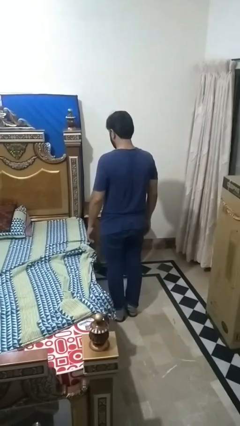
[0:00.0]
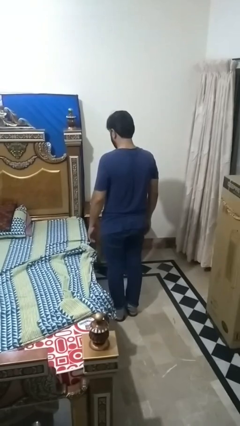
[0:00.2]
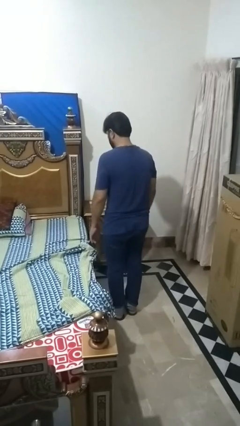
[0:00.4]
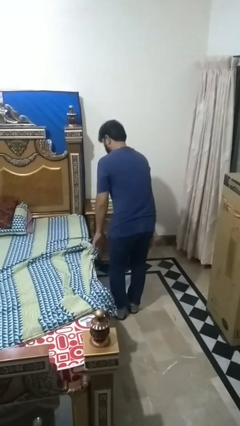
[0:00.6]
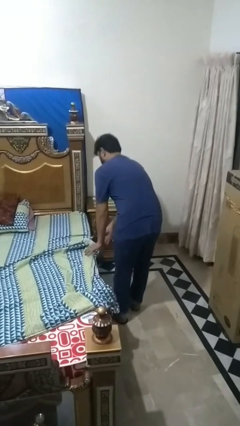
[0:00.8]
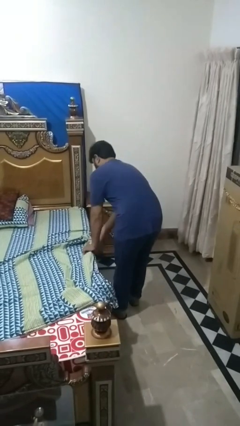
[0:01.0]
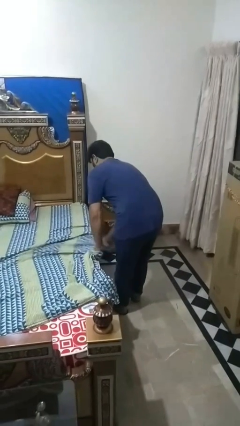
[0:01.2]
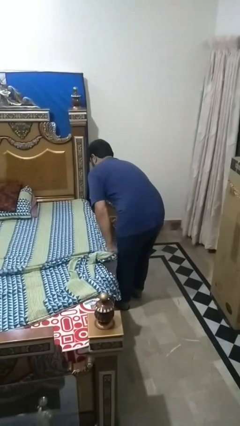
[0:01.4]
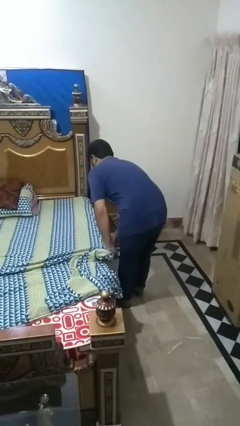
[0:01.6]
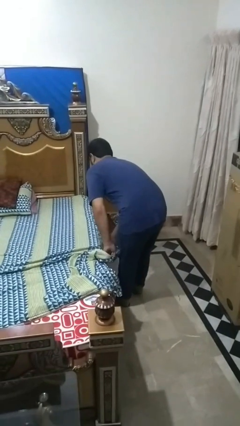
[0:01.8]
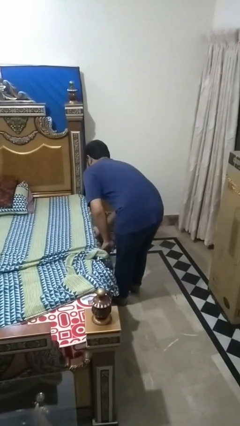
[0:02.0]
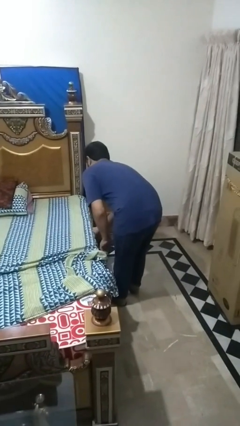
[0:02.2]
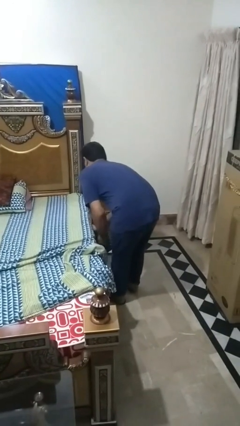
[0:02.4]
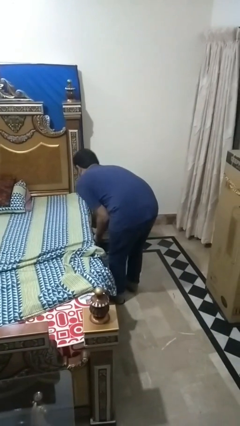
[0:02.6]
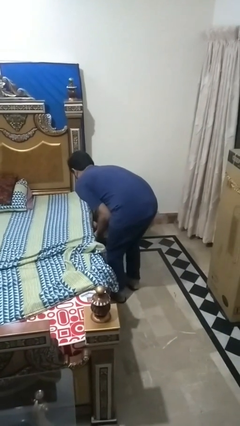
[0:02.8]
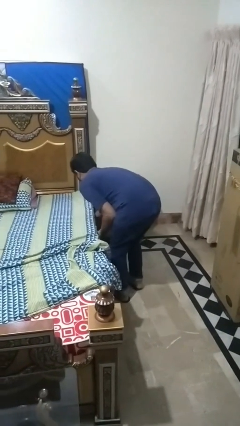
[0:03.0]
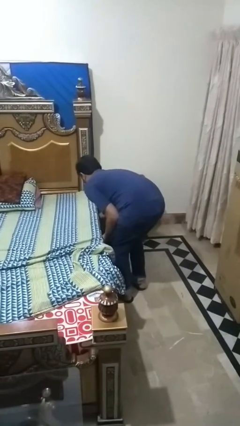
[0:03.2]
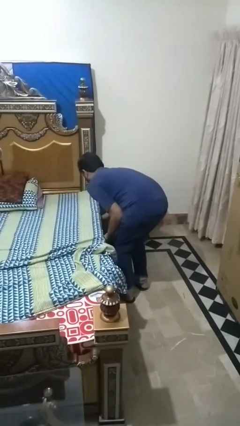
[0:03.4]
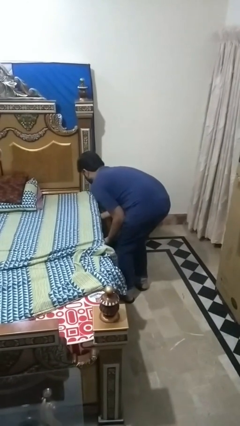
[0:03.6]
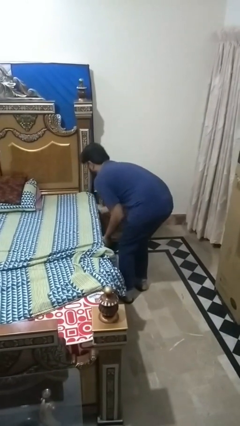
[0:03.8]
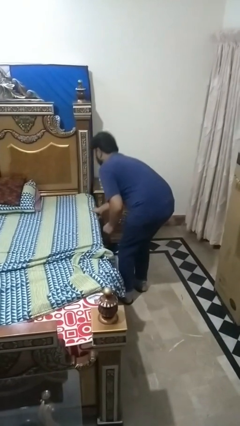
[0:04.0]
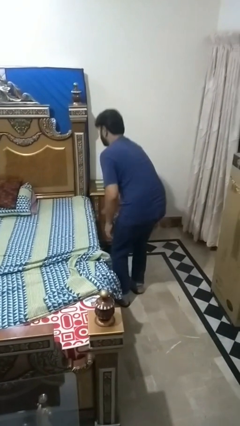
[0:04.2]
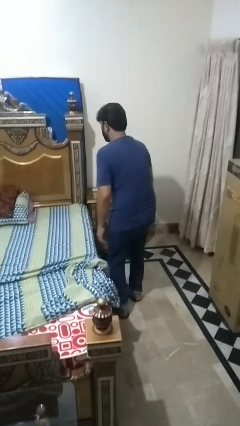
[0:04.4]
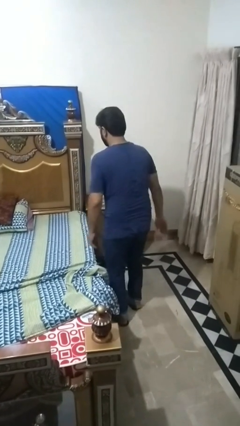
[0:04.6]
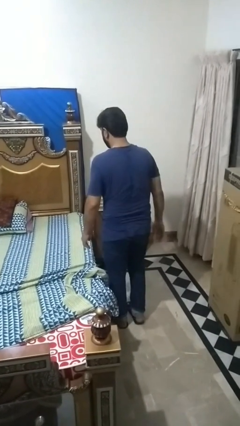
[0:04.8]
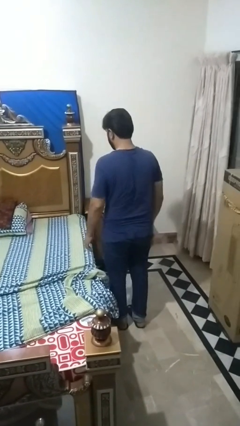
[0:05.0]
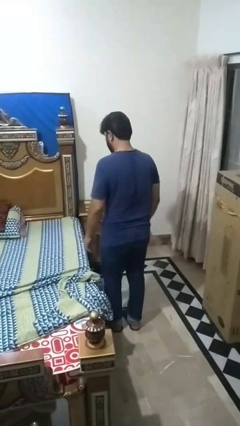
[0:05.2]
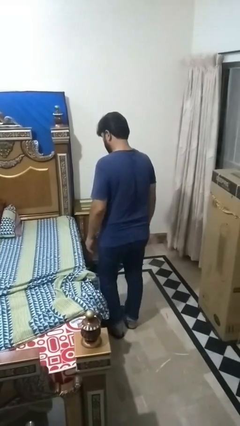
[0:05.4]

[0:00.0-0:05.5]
person makes bed

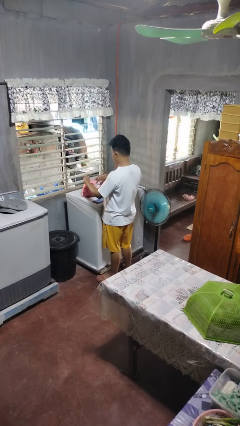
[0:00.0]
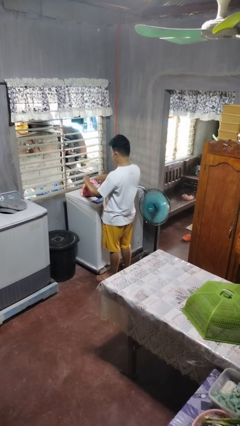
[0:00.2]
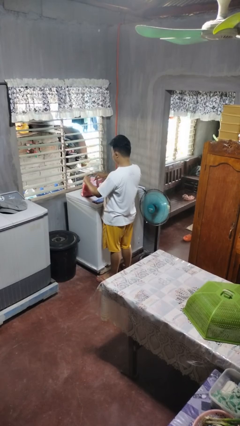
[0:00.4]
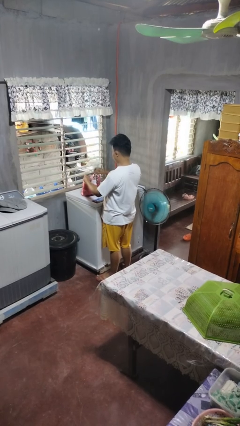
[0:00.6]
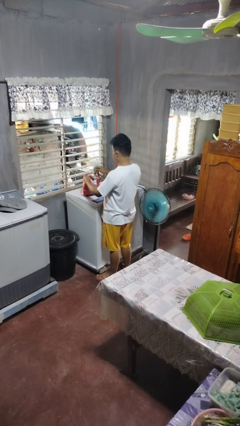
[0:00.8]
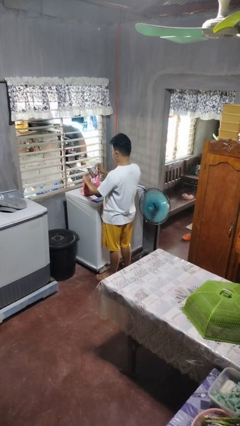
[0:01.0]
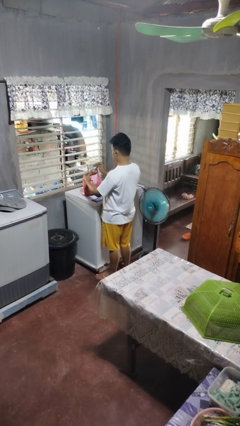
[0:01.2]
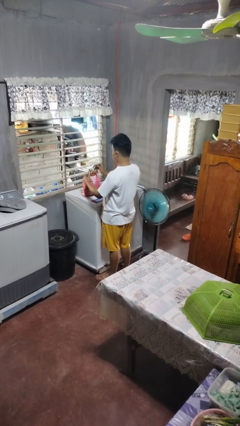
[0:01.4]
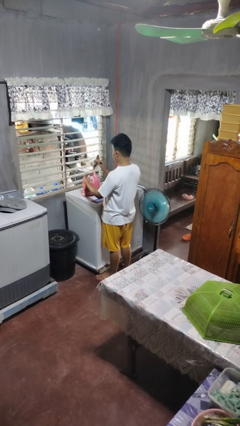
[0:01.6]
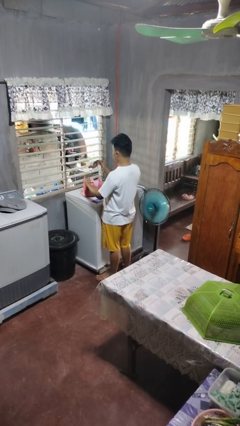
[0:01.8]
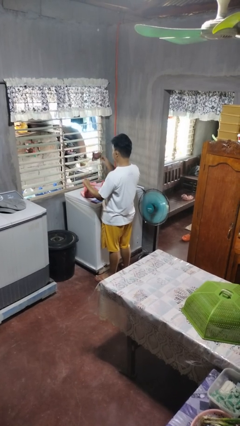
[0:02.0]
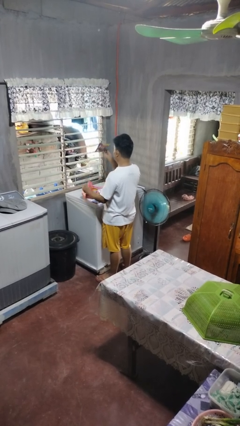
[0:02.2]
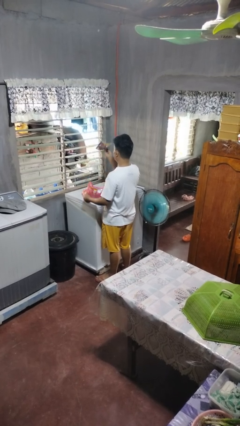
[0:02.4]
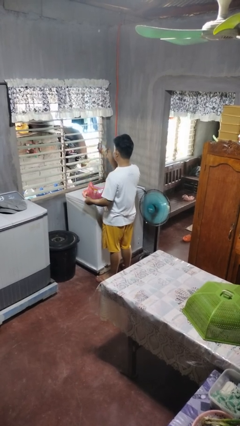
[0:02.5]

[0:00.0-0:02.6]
person takes object from bag

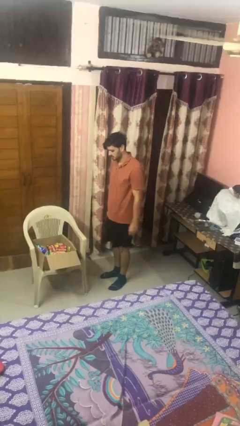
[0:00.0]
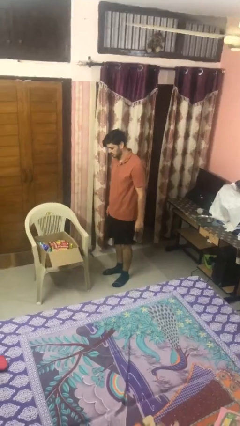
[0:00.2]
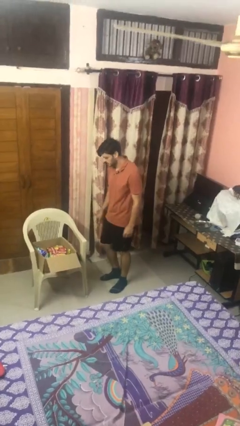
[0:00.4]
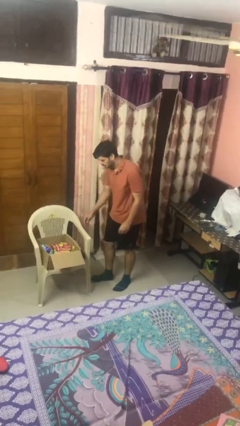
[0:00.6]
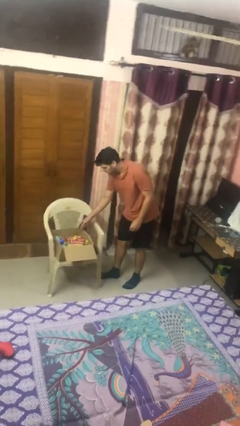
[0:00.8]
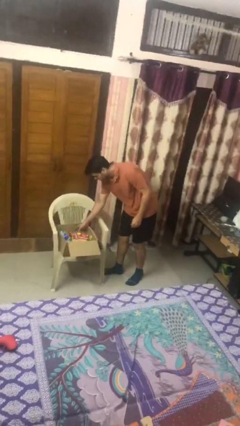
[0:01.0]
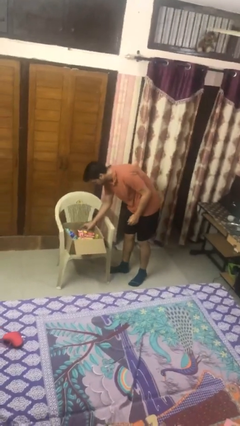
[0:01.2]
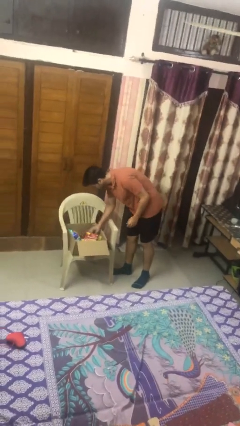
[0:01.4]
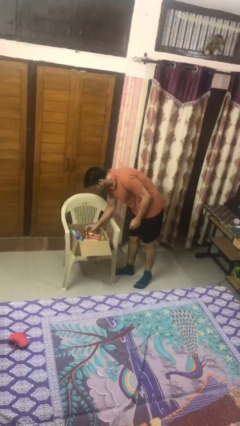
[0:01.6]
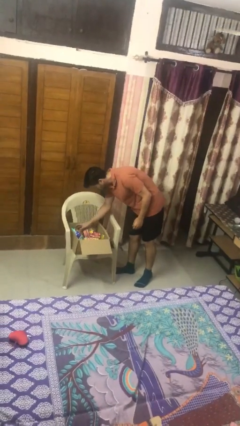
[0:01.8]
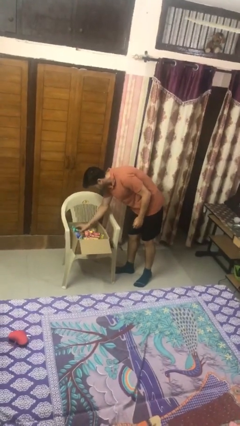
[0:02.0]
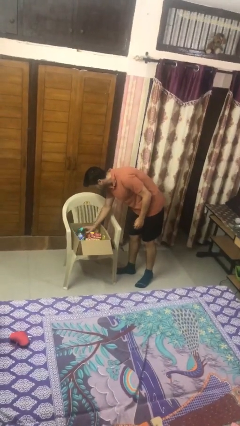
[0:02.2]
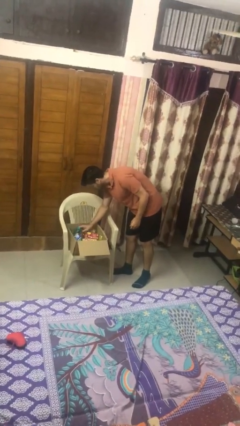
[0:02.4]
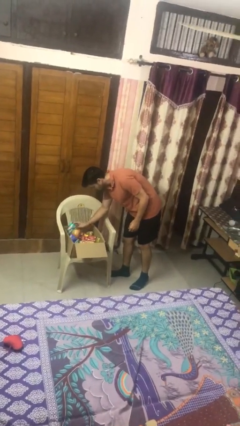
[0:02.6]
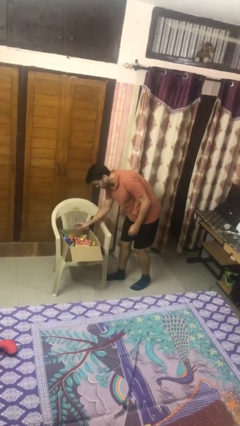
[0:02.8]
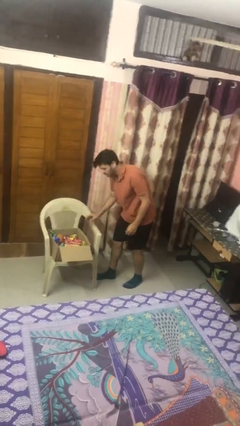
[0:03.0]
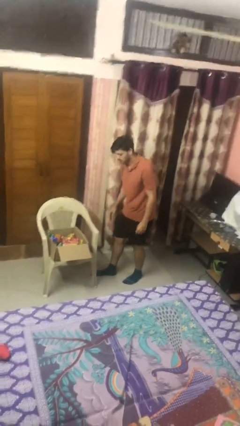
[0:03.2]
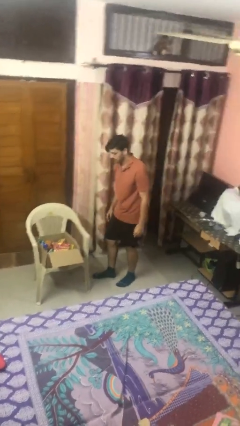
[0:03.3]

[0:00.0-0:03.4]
person searches in box

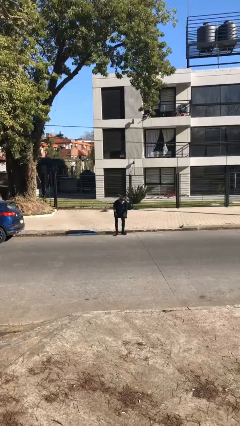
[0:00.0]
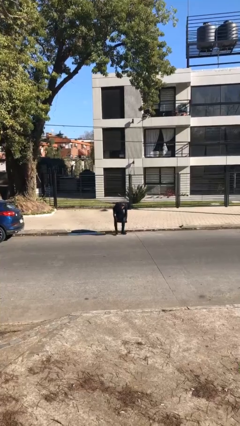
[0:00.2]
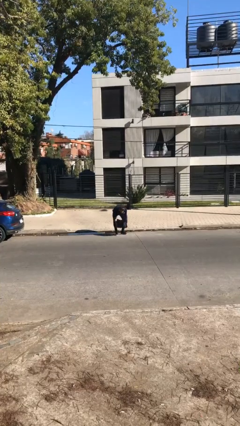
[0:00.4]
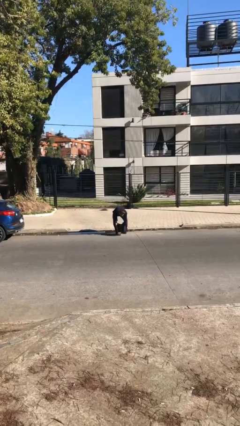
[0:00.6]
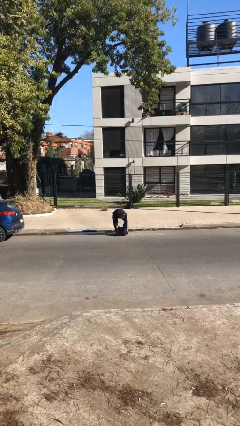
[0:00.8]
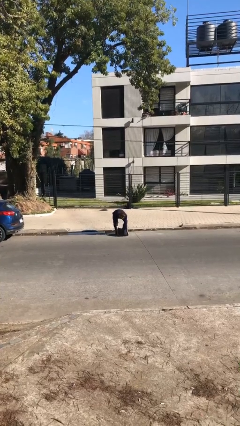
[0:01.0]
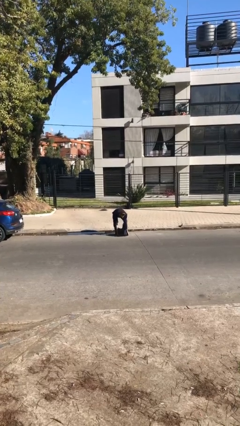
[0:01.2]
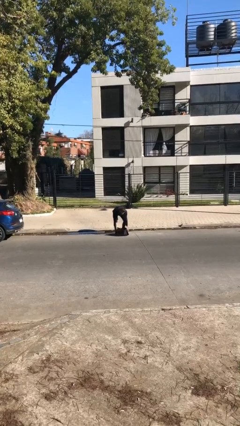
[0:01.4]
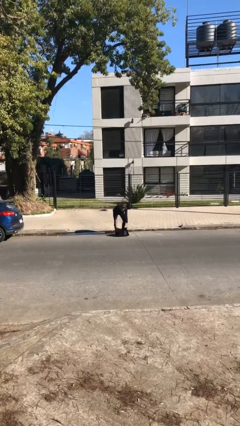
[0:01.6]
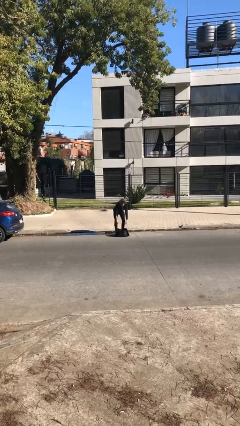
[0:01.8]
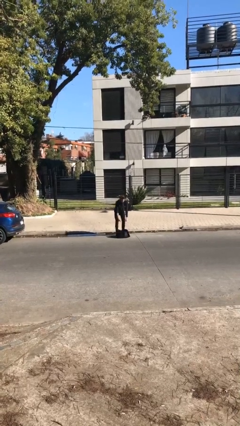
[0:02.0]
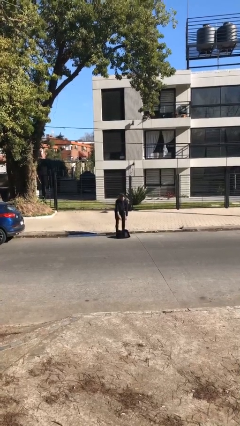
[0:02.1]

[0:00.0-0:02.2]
person puts down object on floor

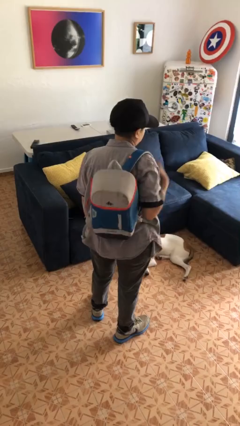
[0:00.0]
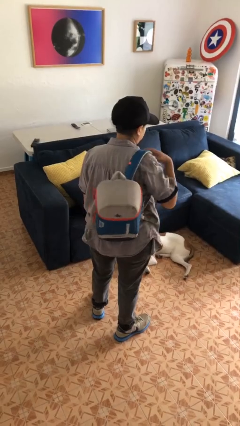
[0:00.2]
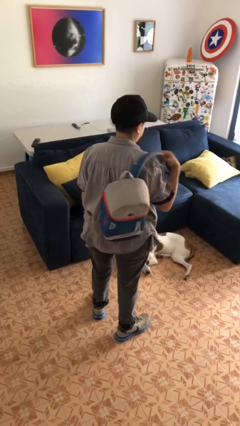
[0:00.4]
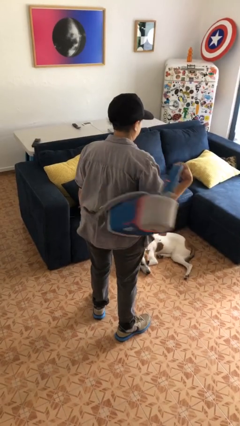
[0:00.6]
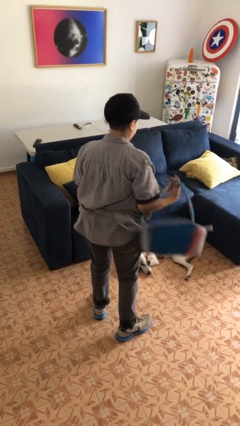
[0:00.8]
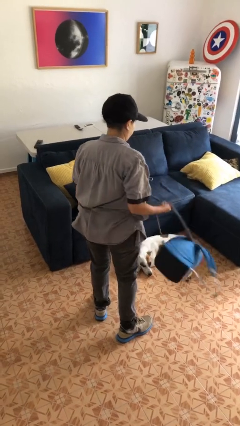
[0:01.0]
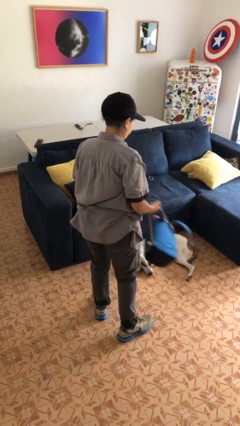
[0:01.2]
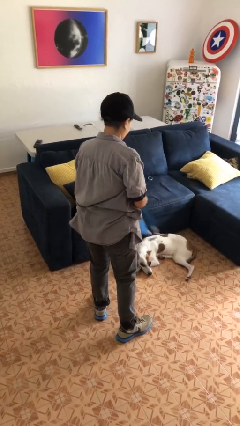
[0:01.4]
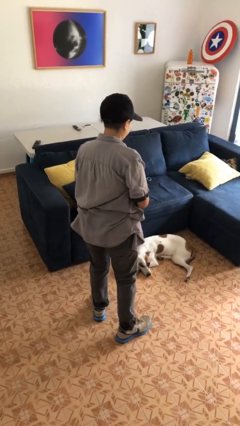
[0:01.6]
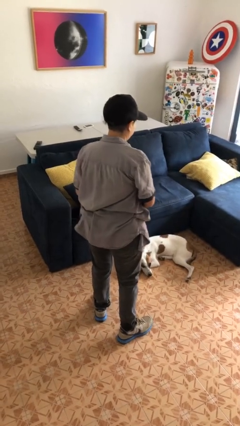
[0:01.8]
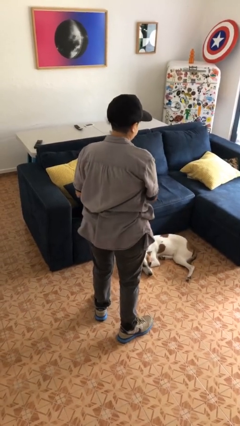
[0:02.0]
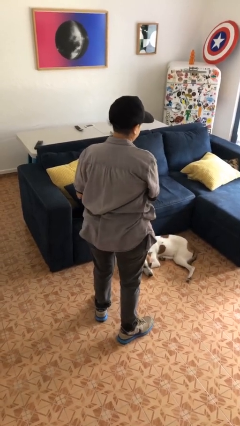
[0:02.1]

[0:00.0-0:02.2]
person takes off backpack

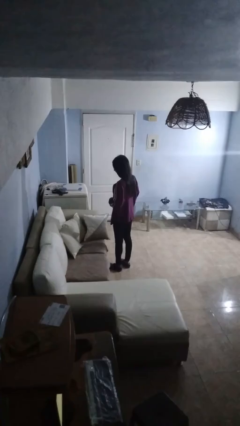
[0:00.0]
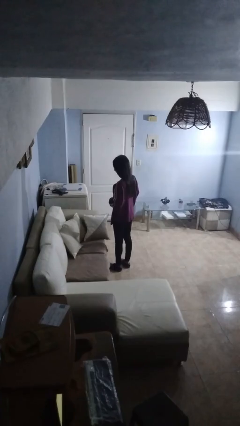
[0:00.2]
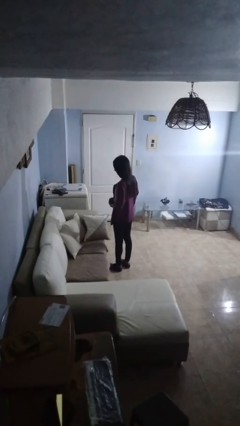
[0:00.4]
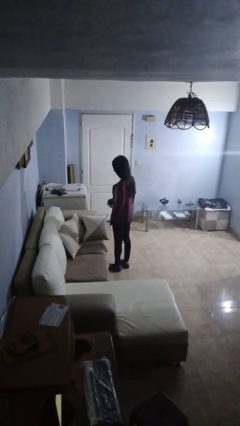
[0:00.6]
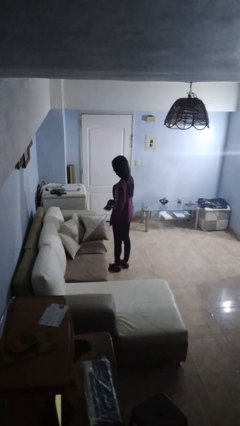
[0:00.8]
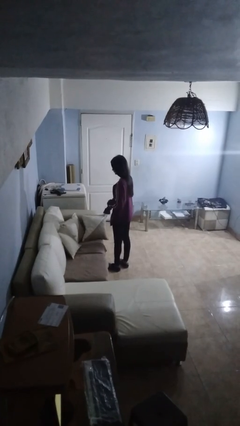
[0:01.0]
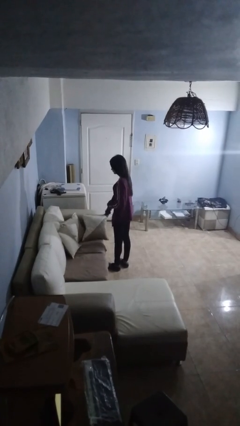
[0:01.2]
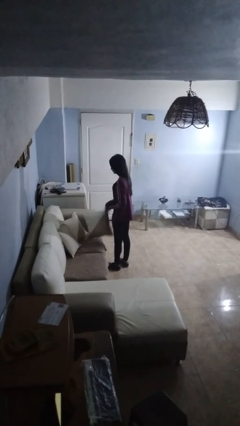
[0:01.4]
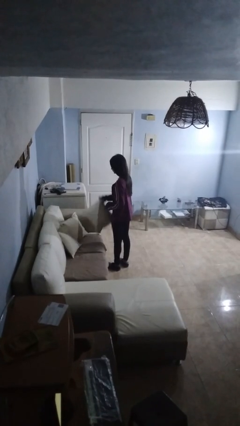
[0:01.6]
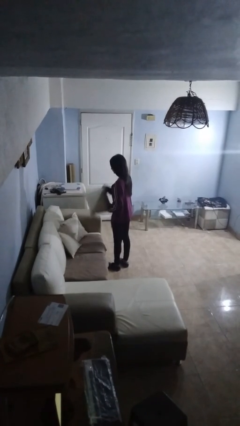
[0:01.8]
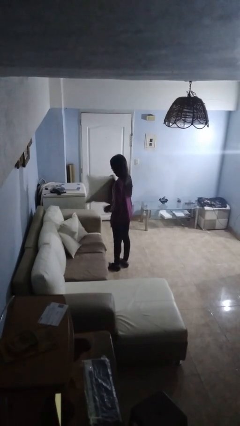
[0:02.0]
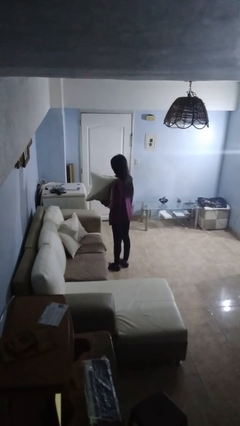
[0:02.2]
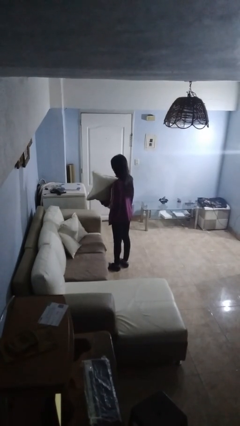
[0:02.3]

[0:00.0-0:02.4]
person puts down object on couch
